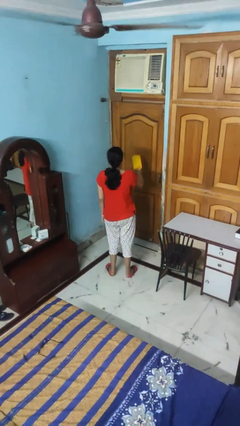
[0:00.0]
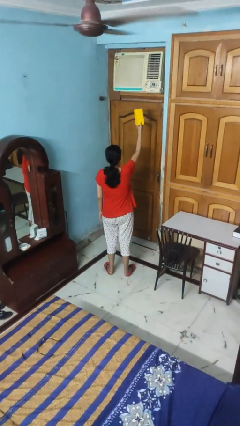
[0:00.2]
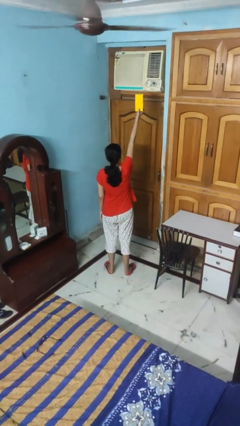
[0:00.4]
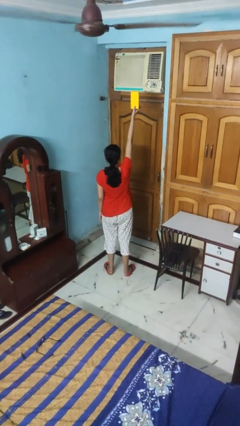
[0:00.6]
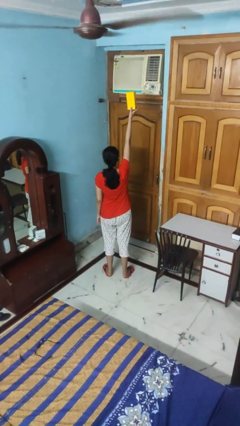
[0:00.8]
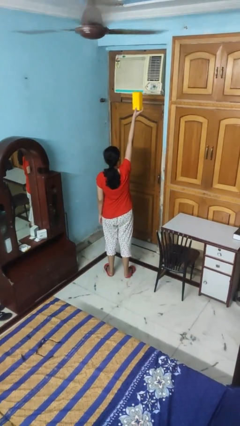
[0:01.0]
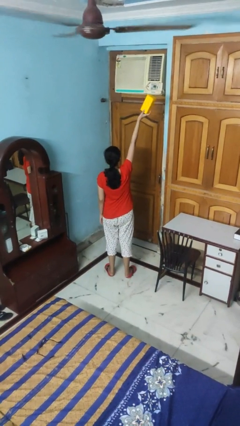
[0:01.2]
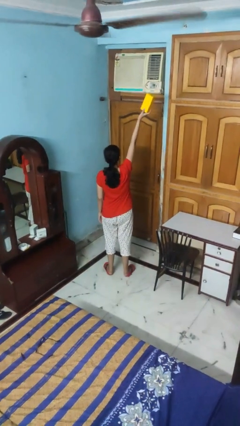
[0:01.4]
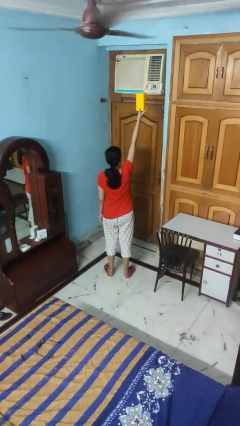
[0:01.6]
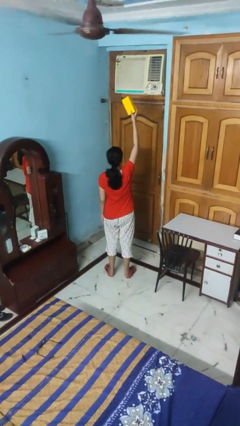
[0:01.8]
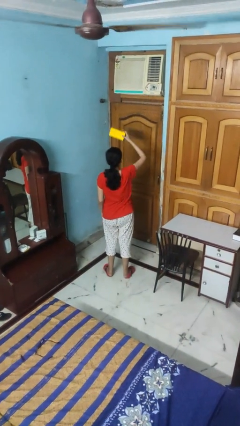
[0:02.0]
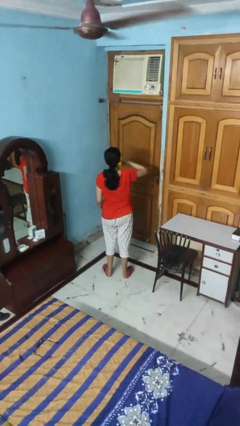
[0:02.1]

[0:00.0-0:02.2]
person holds object above head

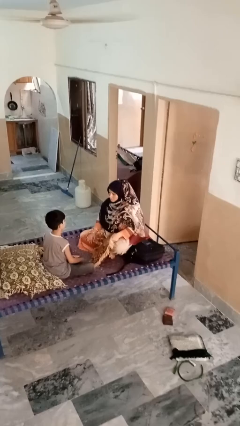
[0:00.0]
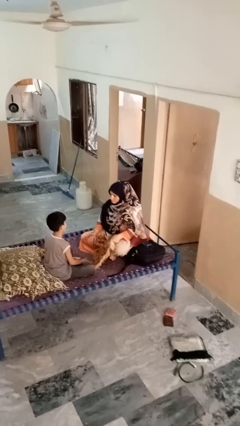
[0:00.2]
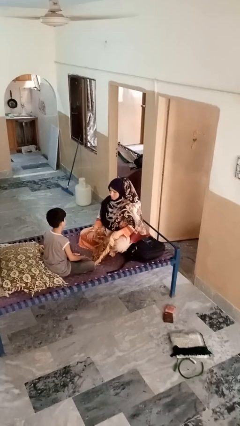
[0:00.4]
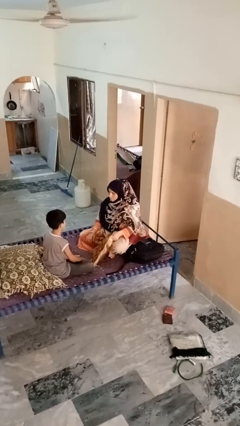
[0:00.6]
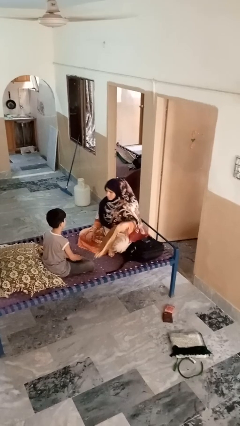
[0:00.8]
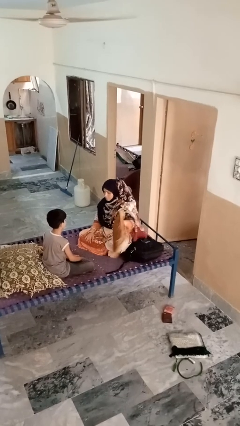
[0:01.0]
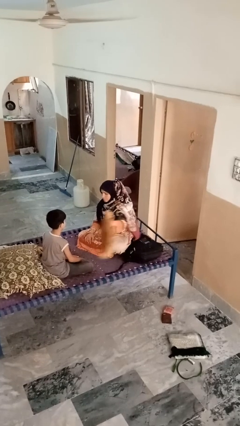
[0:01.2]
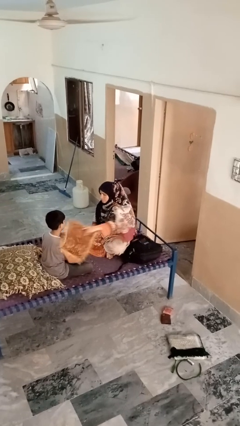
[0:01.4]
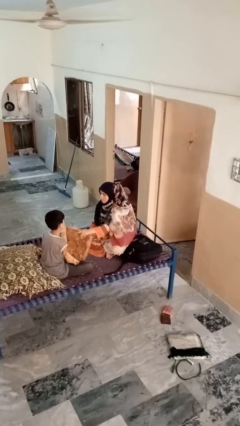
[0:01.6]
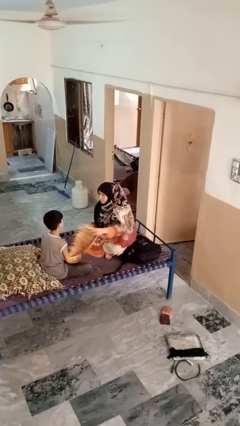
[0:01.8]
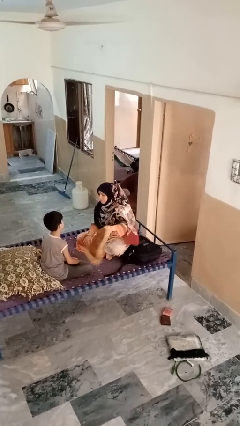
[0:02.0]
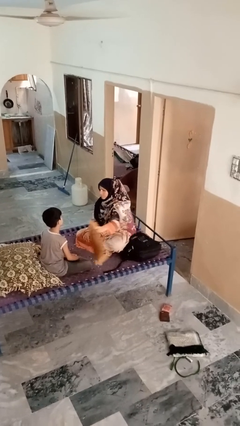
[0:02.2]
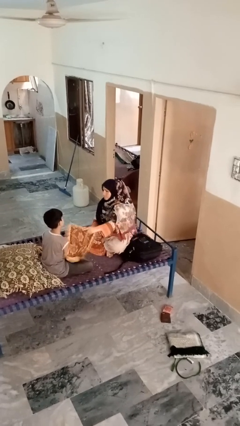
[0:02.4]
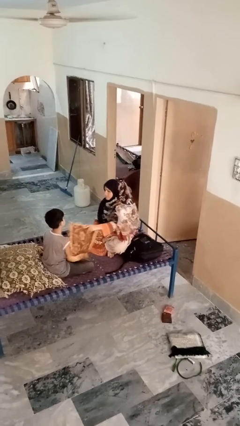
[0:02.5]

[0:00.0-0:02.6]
person hits person with pillow

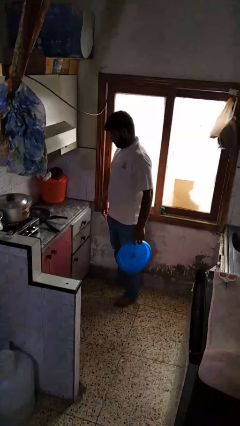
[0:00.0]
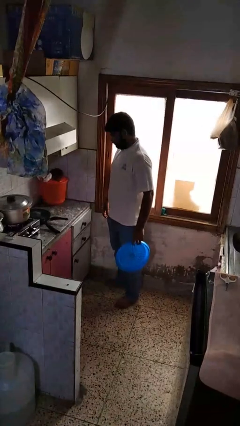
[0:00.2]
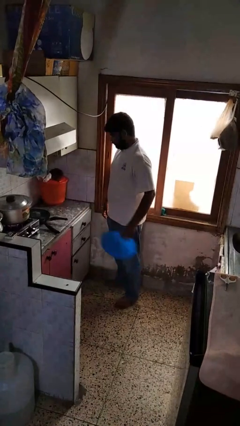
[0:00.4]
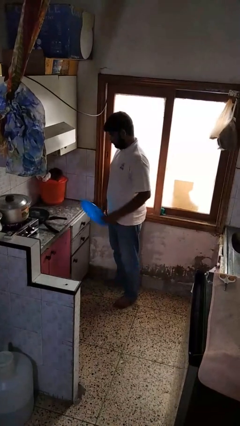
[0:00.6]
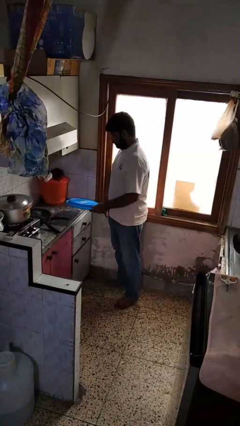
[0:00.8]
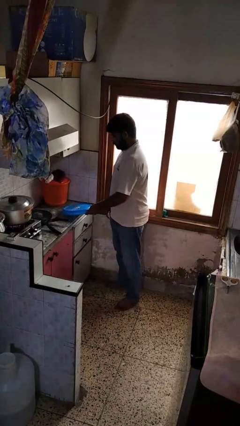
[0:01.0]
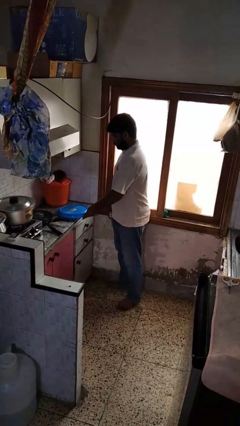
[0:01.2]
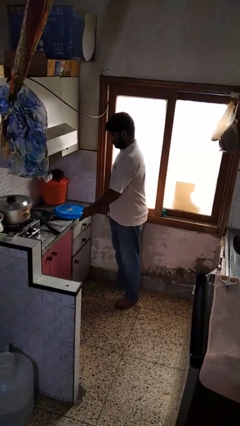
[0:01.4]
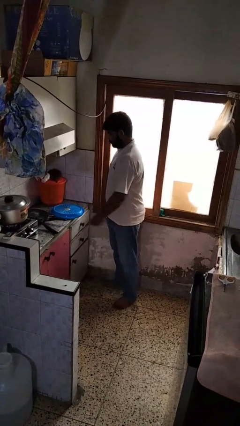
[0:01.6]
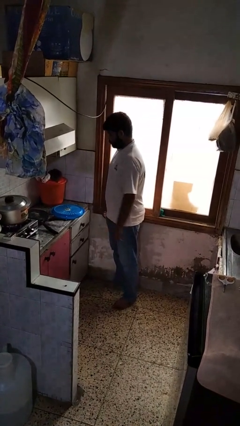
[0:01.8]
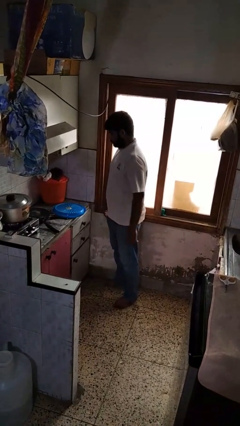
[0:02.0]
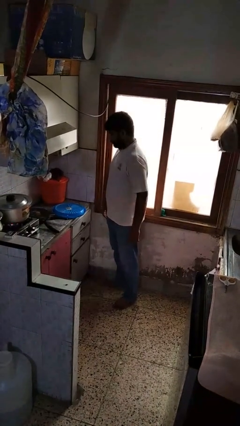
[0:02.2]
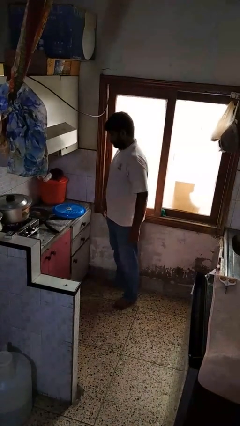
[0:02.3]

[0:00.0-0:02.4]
person puts down object on countertop

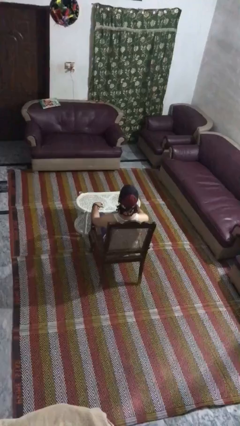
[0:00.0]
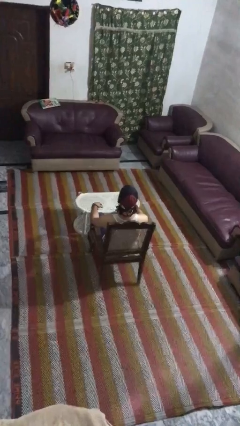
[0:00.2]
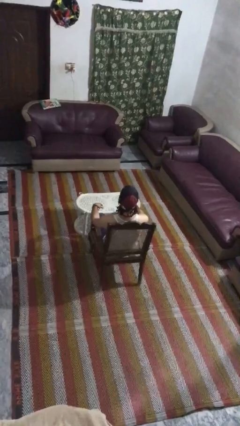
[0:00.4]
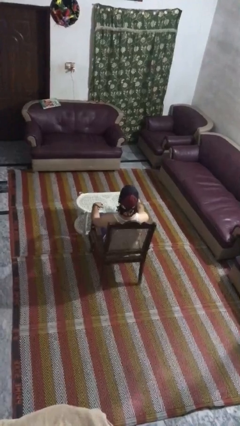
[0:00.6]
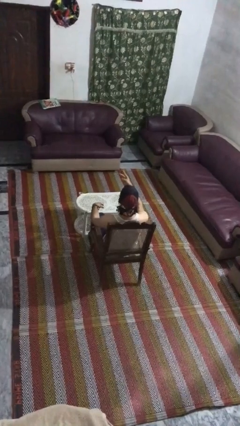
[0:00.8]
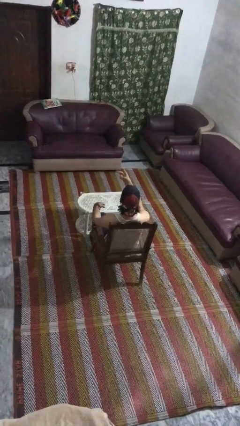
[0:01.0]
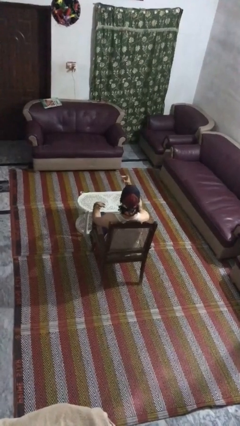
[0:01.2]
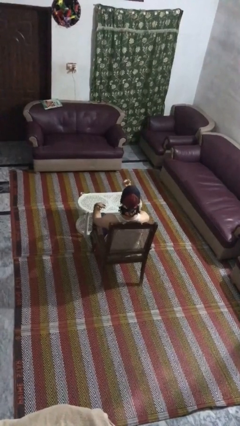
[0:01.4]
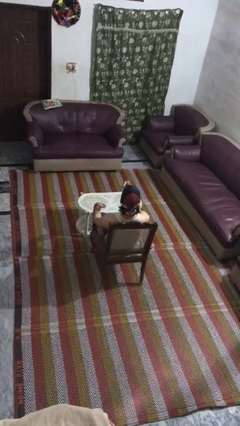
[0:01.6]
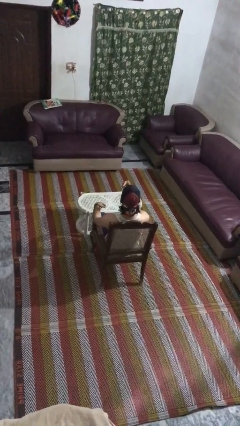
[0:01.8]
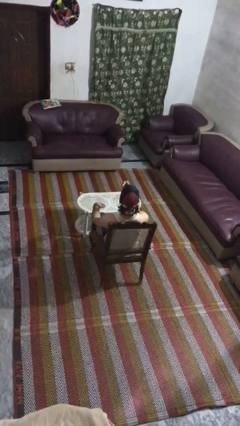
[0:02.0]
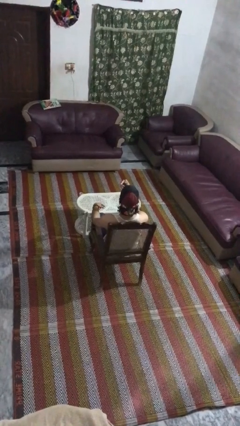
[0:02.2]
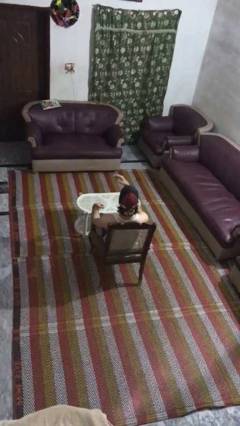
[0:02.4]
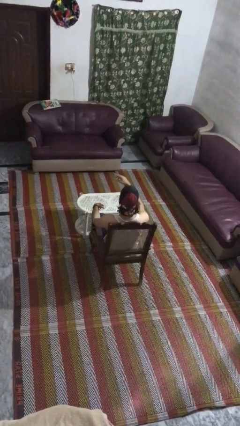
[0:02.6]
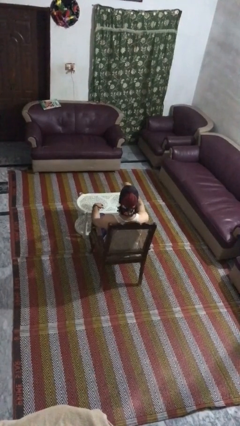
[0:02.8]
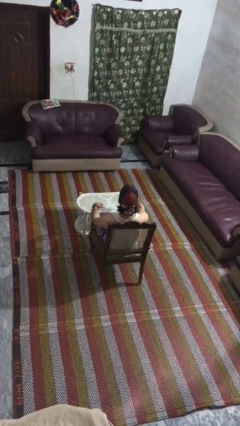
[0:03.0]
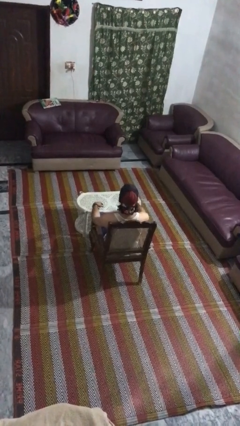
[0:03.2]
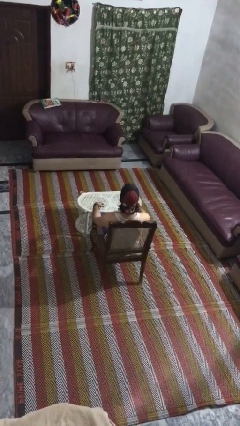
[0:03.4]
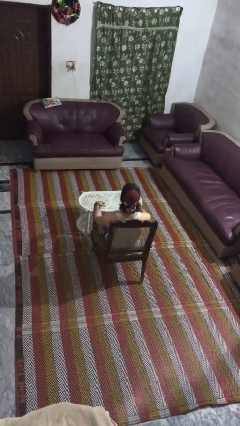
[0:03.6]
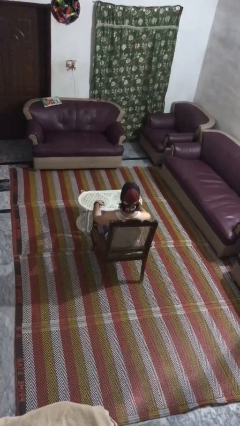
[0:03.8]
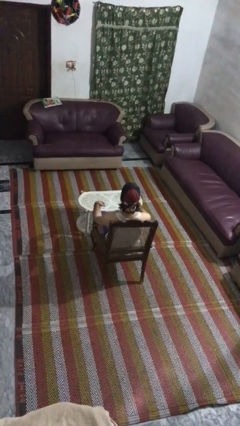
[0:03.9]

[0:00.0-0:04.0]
person gestures watch closely

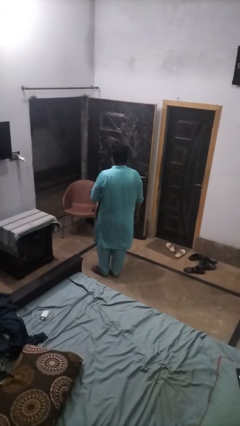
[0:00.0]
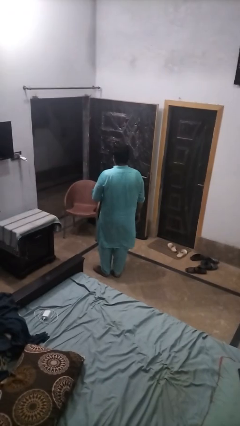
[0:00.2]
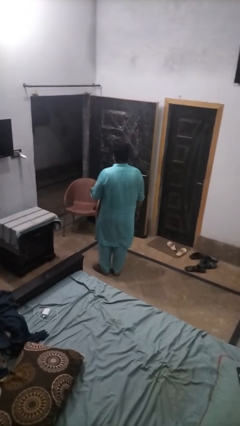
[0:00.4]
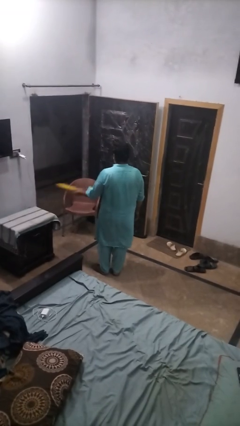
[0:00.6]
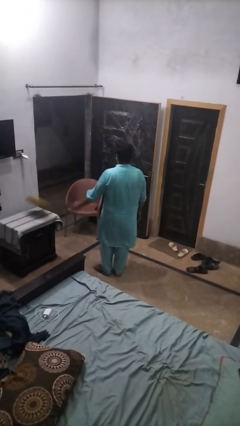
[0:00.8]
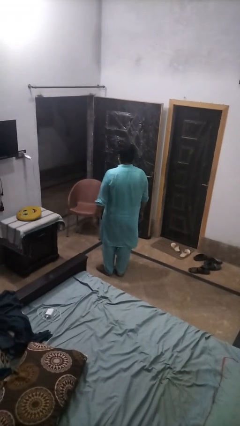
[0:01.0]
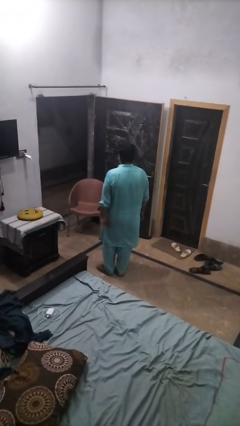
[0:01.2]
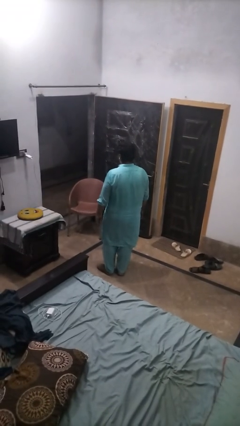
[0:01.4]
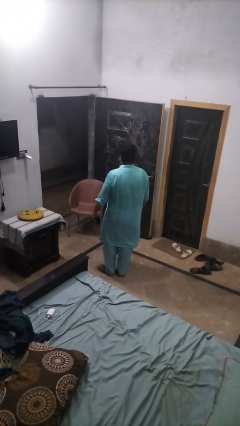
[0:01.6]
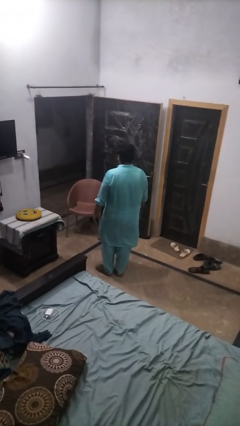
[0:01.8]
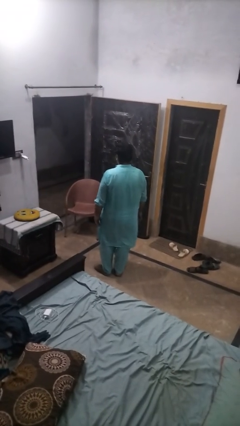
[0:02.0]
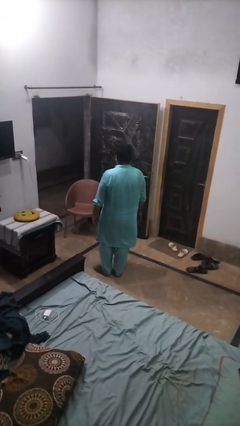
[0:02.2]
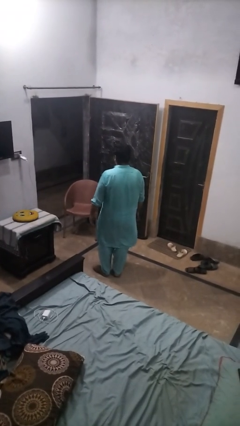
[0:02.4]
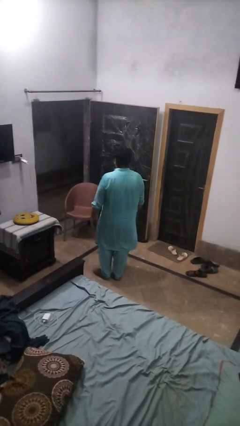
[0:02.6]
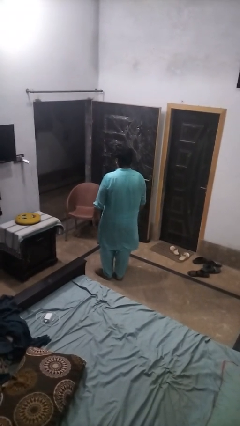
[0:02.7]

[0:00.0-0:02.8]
person throws object on table

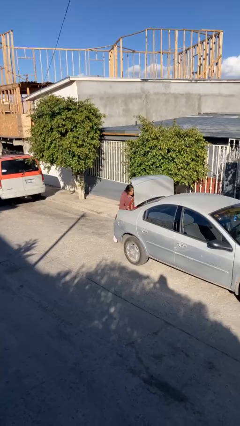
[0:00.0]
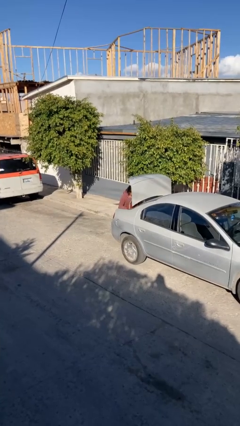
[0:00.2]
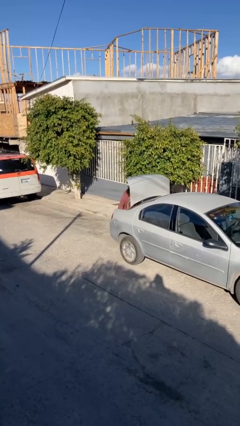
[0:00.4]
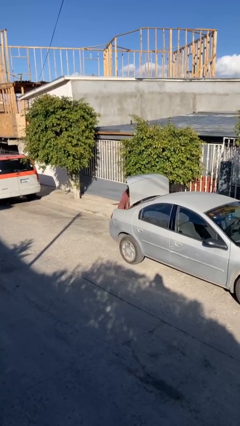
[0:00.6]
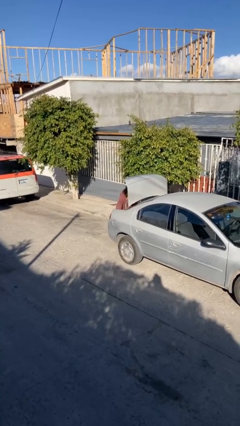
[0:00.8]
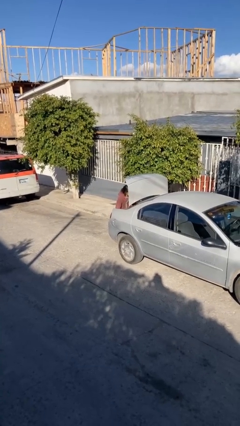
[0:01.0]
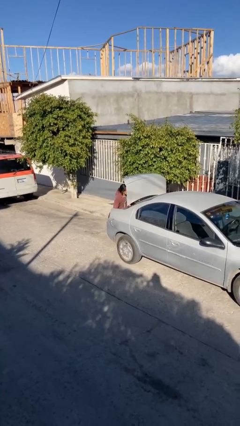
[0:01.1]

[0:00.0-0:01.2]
person loads car

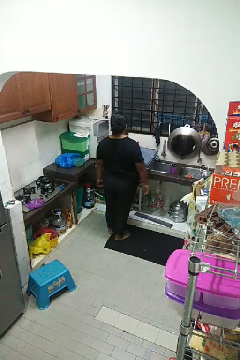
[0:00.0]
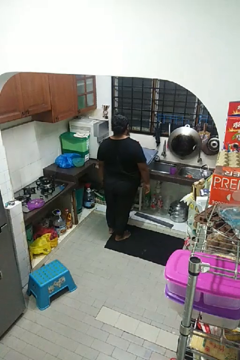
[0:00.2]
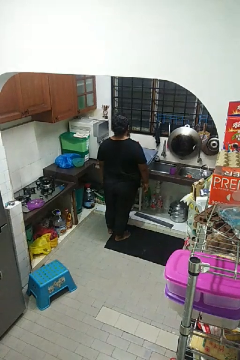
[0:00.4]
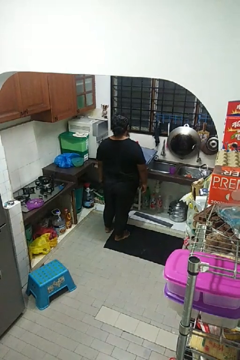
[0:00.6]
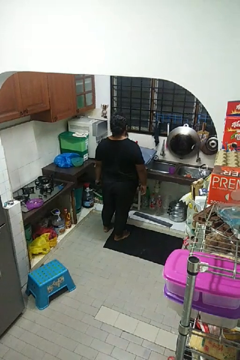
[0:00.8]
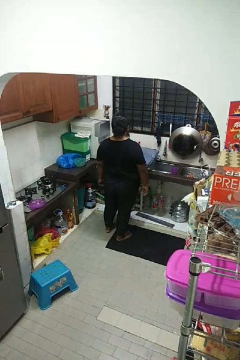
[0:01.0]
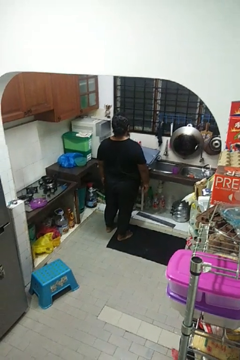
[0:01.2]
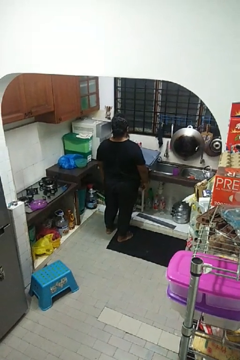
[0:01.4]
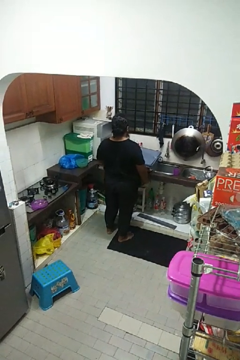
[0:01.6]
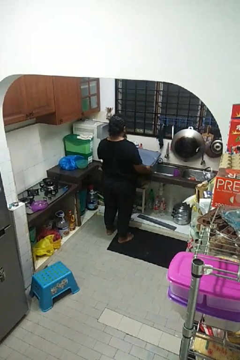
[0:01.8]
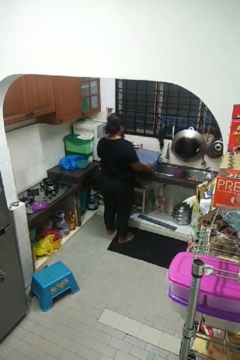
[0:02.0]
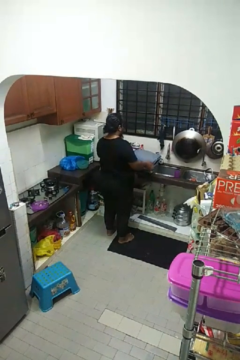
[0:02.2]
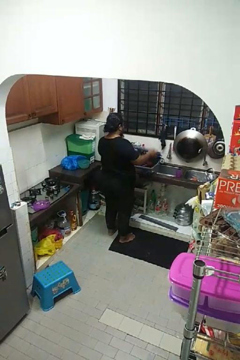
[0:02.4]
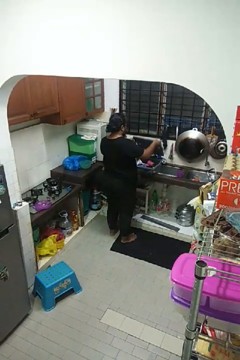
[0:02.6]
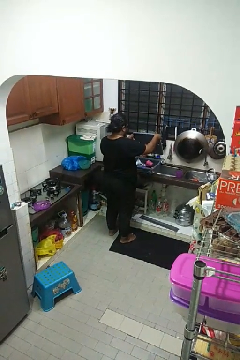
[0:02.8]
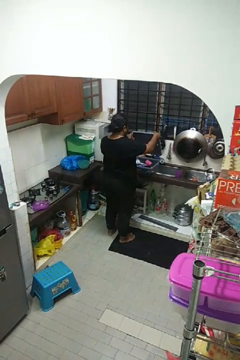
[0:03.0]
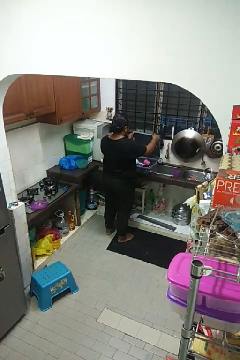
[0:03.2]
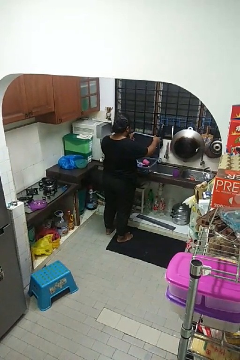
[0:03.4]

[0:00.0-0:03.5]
person opens dishwasher
